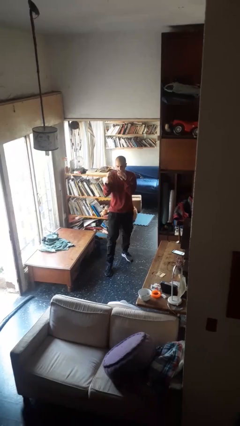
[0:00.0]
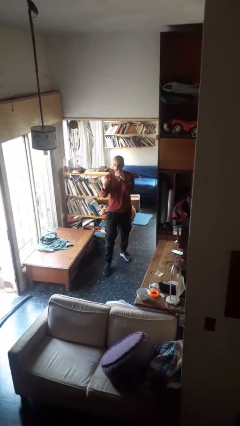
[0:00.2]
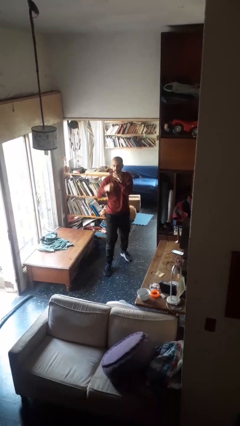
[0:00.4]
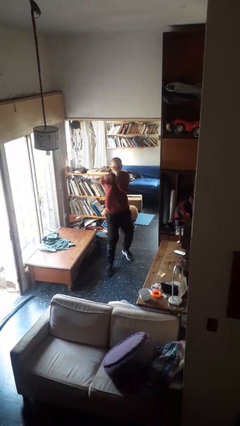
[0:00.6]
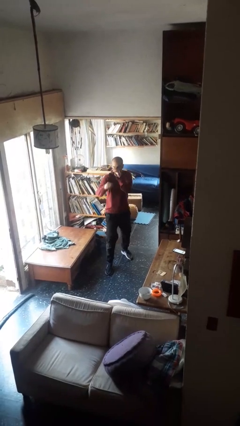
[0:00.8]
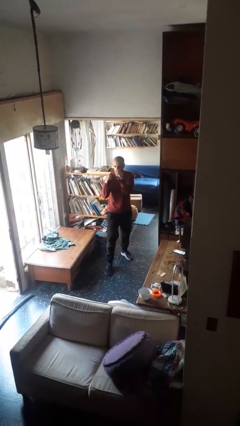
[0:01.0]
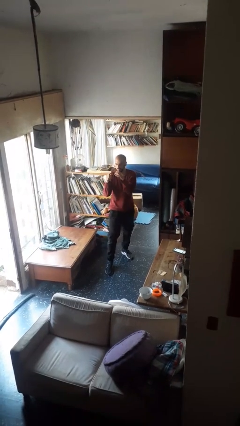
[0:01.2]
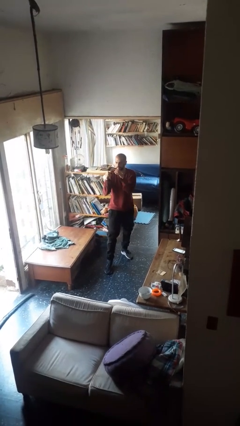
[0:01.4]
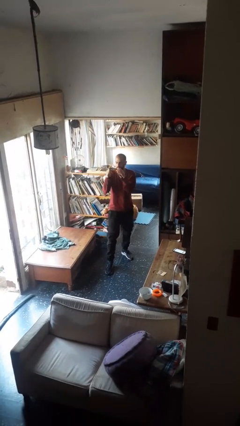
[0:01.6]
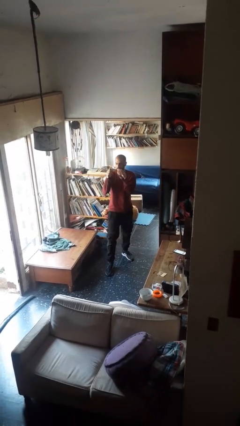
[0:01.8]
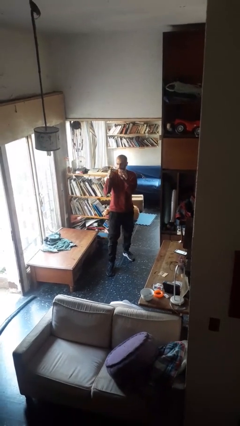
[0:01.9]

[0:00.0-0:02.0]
person karate chop

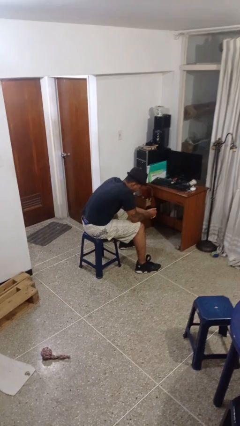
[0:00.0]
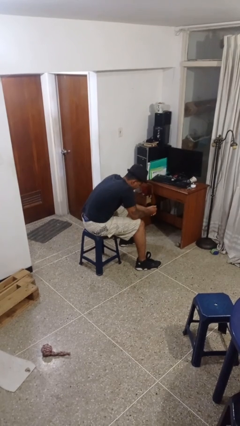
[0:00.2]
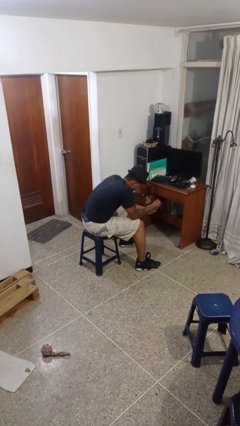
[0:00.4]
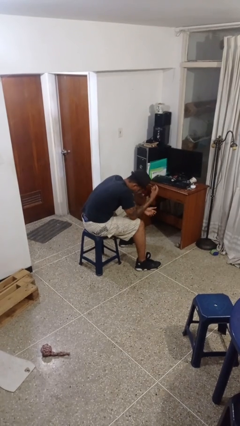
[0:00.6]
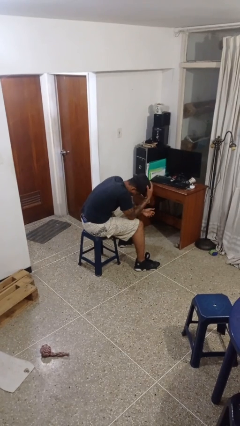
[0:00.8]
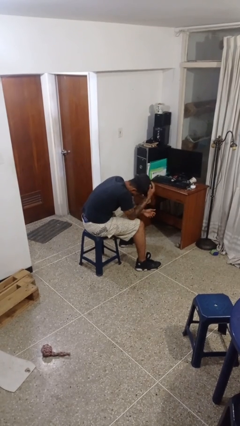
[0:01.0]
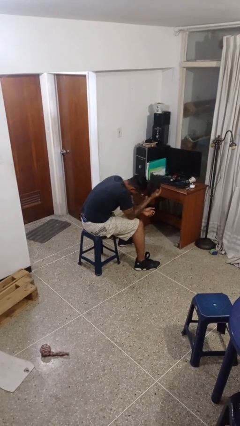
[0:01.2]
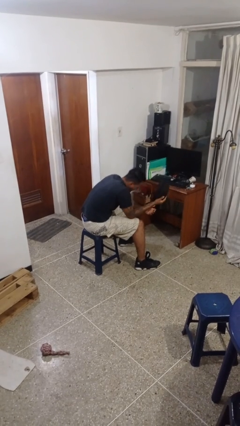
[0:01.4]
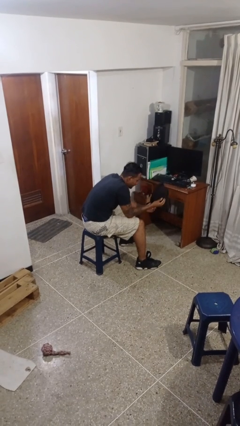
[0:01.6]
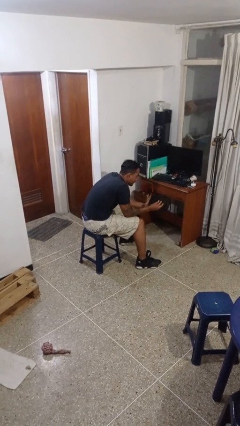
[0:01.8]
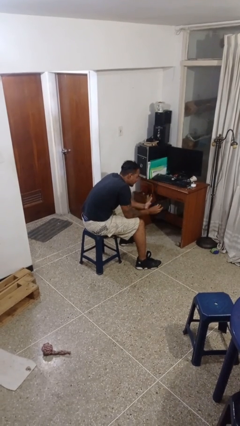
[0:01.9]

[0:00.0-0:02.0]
person takes off hat

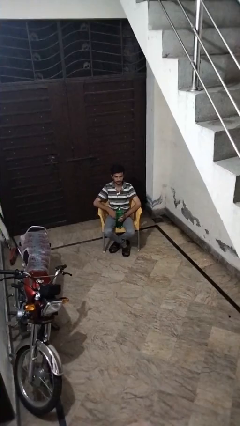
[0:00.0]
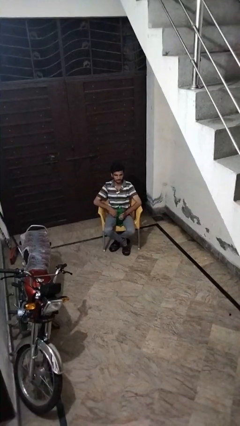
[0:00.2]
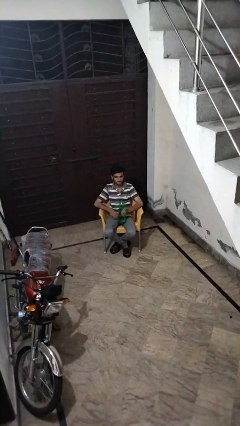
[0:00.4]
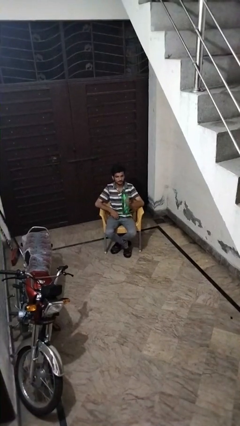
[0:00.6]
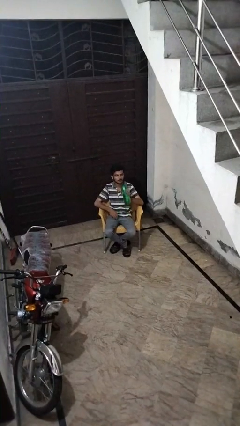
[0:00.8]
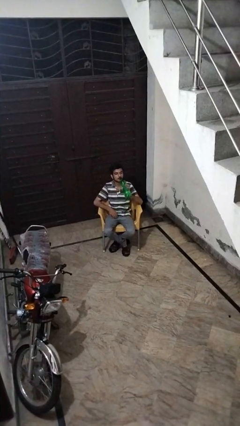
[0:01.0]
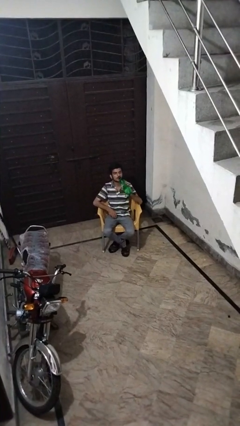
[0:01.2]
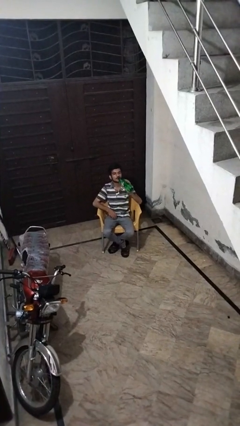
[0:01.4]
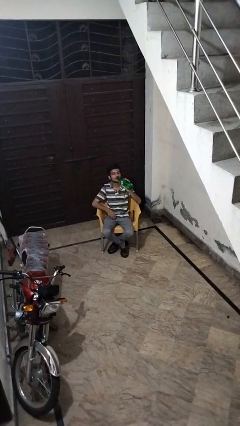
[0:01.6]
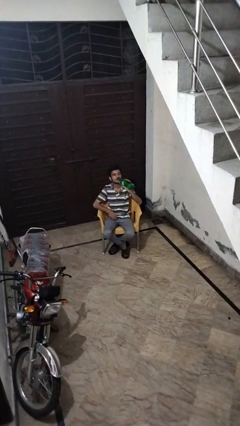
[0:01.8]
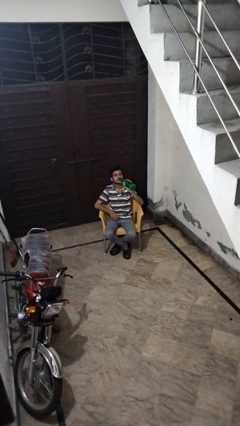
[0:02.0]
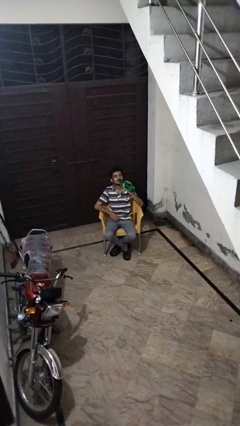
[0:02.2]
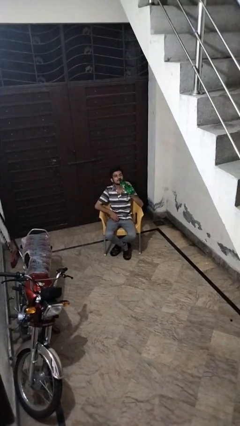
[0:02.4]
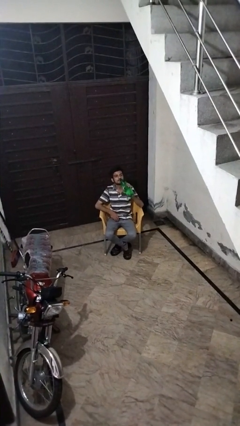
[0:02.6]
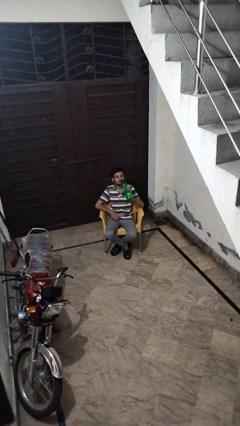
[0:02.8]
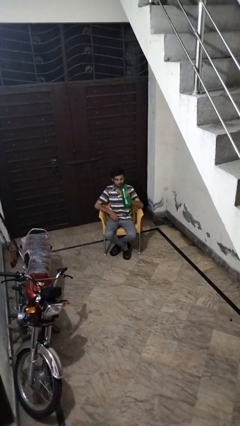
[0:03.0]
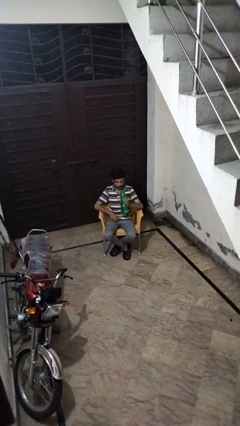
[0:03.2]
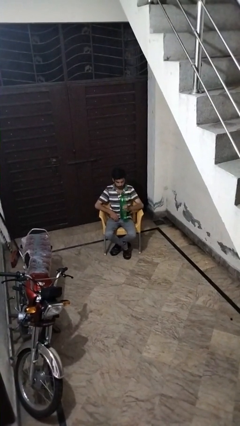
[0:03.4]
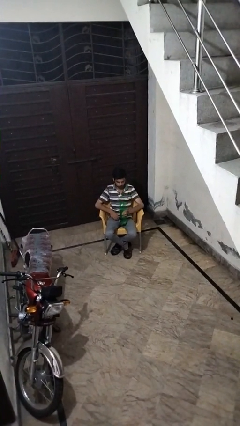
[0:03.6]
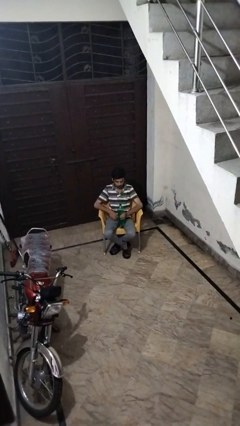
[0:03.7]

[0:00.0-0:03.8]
person drinks from bottle

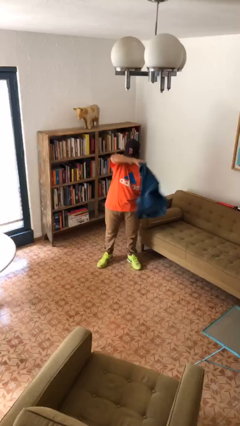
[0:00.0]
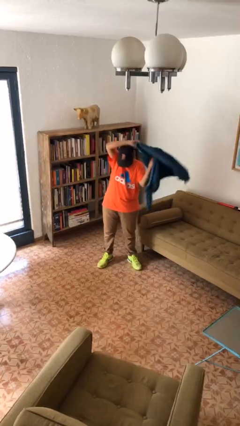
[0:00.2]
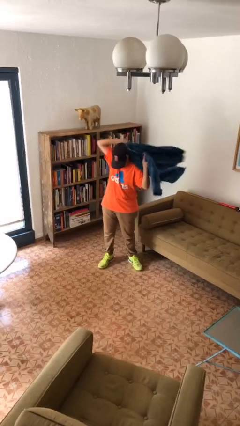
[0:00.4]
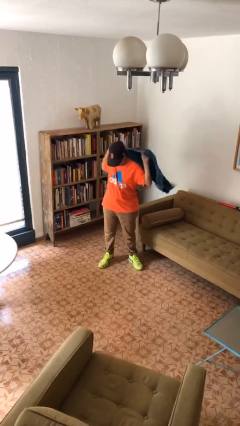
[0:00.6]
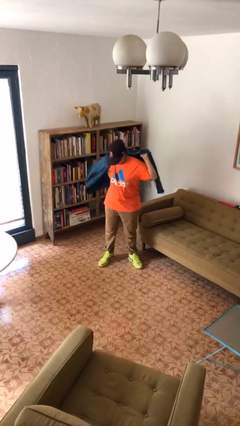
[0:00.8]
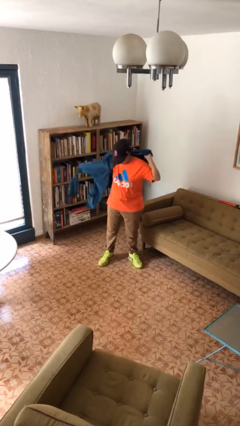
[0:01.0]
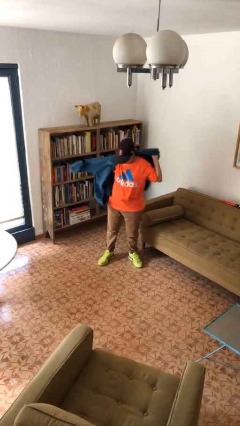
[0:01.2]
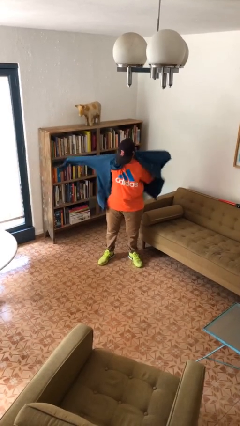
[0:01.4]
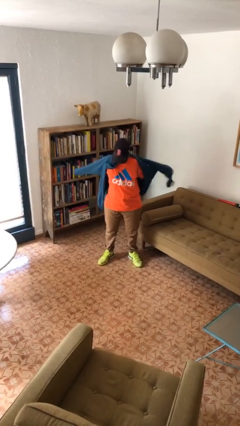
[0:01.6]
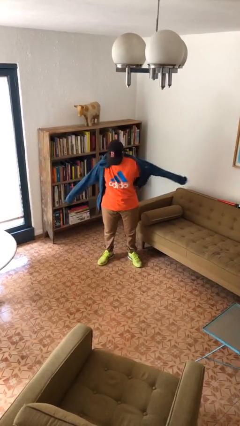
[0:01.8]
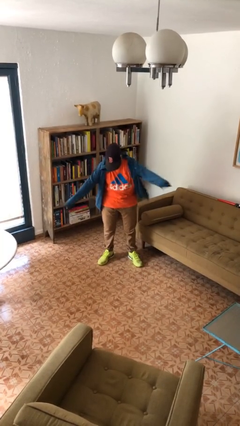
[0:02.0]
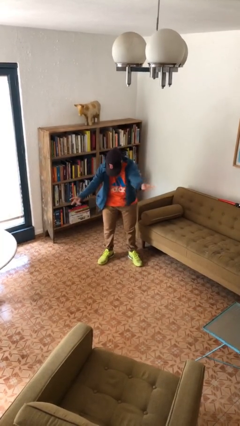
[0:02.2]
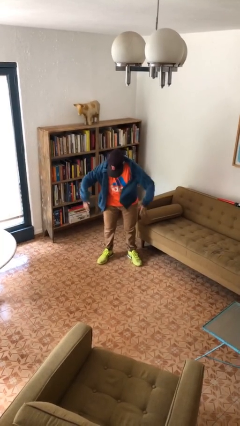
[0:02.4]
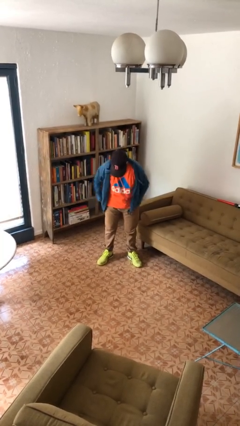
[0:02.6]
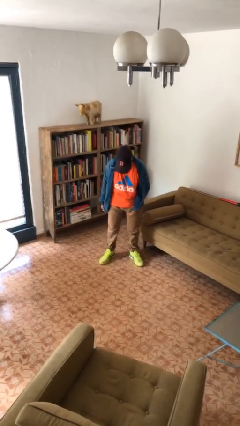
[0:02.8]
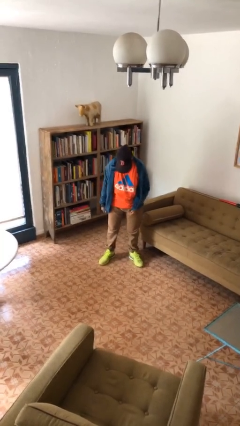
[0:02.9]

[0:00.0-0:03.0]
person puts on jacket

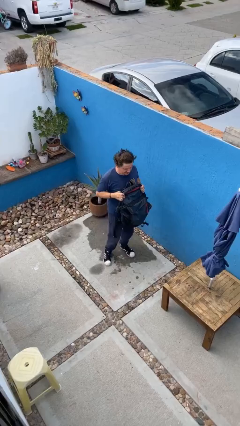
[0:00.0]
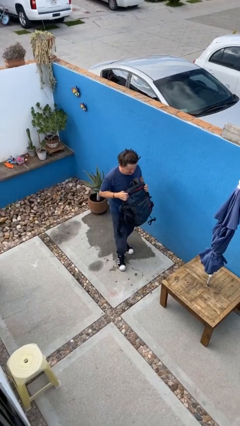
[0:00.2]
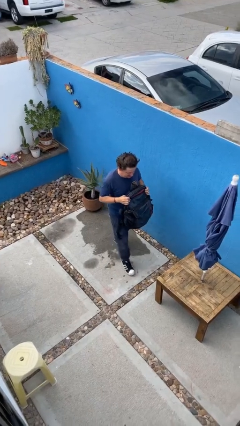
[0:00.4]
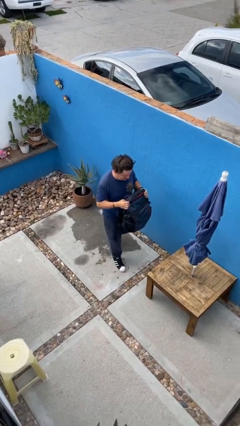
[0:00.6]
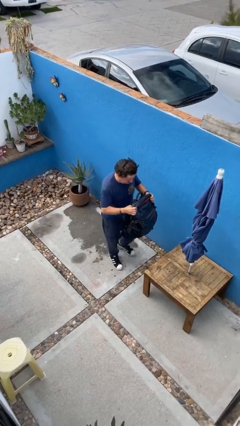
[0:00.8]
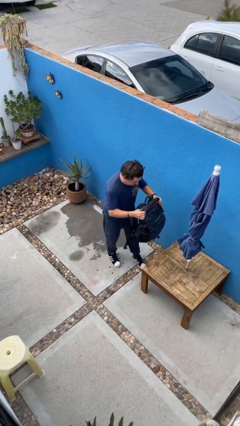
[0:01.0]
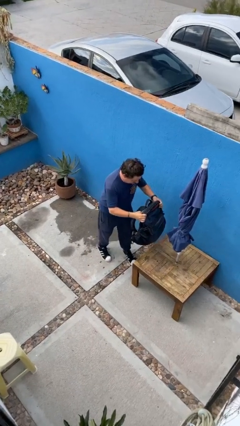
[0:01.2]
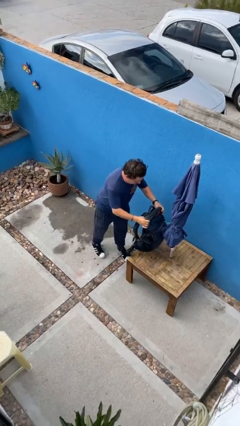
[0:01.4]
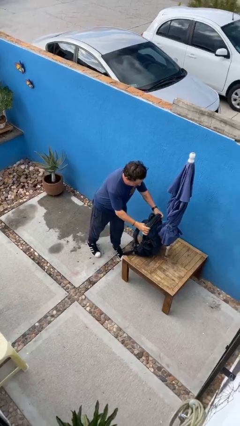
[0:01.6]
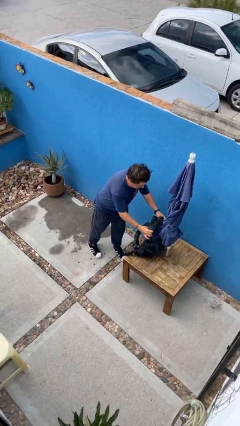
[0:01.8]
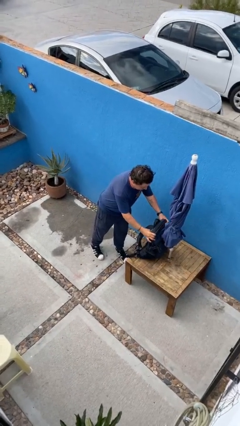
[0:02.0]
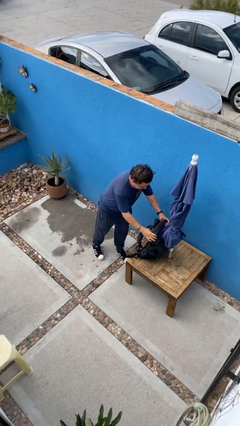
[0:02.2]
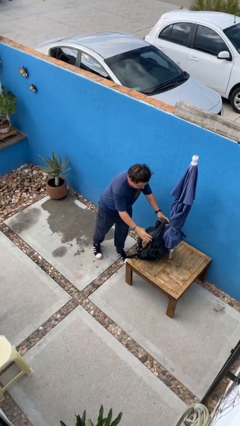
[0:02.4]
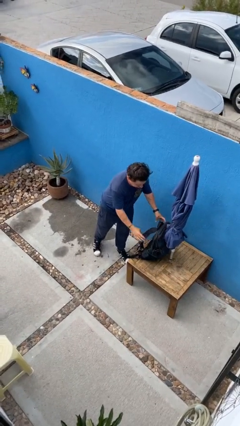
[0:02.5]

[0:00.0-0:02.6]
person puts down object on table

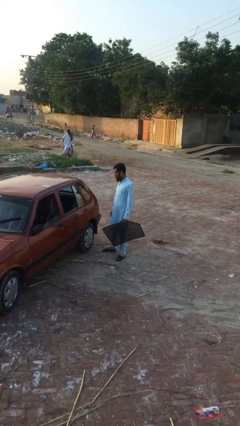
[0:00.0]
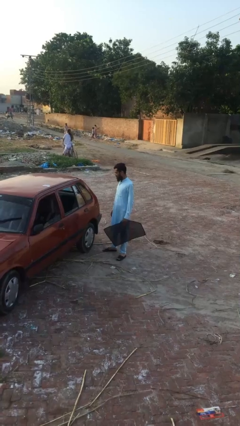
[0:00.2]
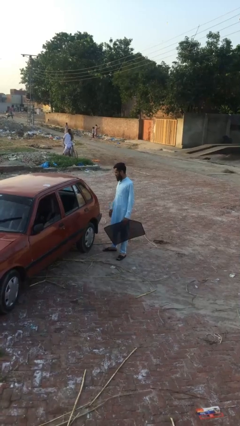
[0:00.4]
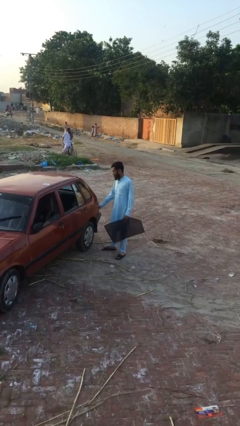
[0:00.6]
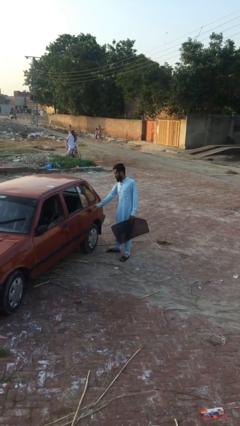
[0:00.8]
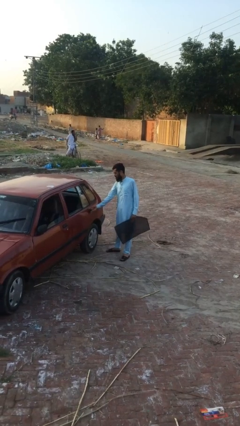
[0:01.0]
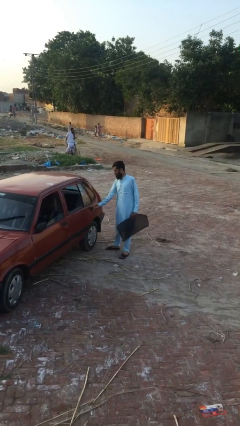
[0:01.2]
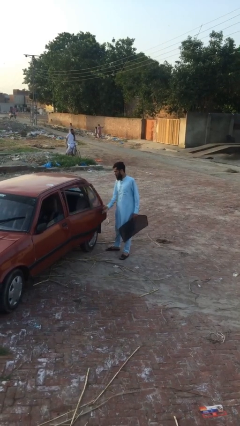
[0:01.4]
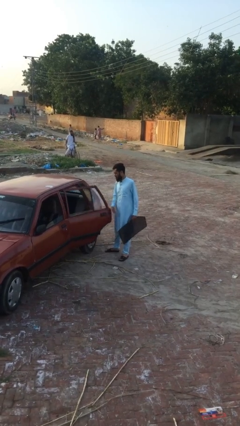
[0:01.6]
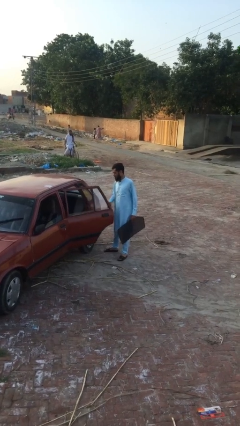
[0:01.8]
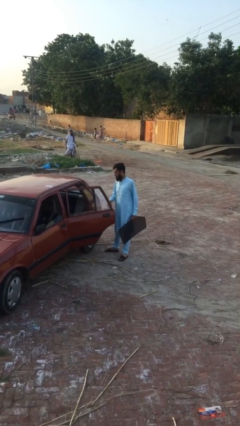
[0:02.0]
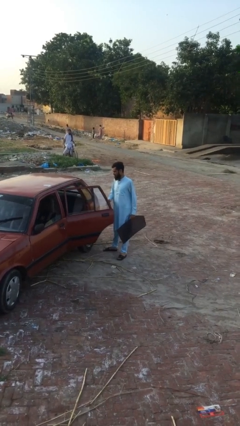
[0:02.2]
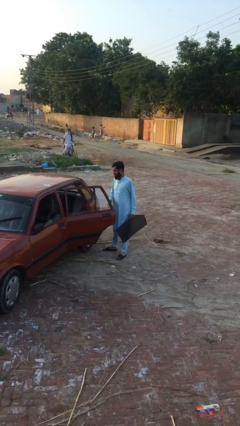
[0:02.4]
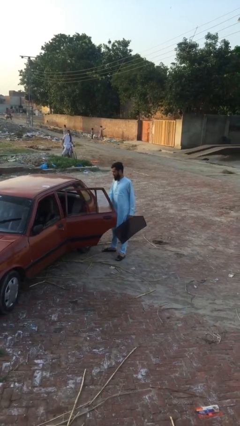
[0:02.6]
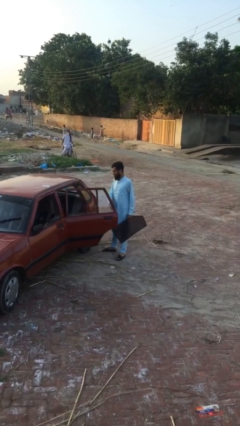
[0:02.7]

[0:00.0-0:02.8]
person opens car door

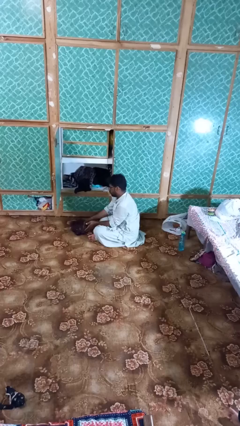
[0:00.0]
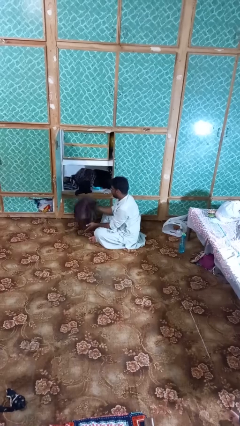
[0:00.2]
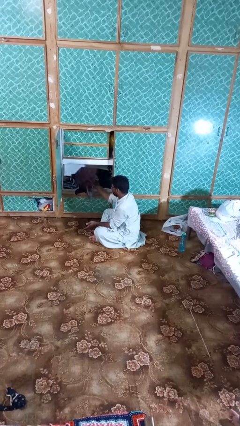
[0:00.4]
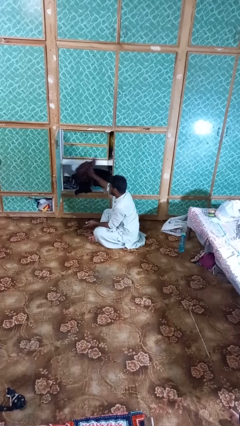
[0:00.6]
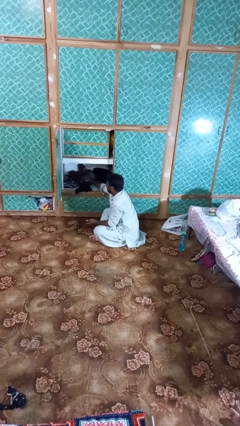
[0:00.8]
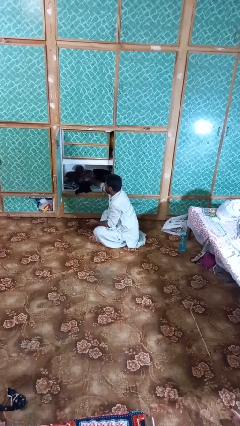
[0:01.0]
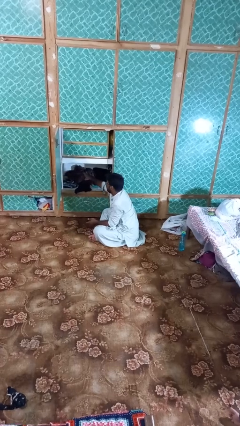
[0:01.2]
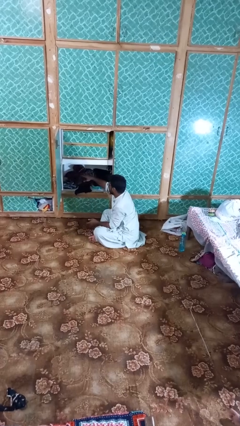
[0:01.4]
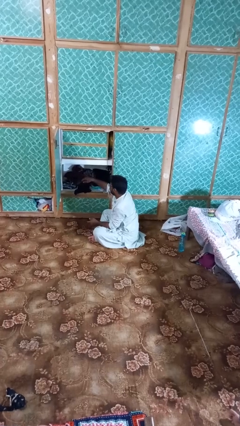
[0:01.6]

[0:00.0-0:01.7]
person puts clothes into dresser
